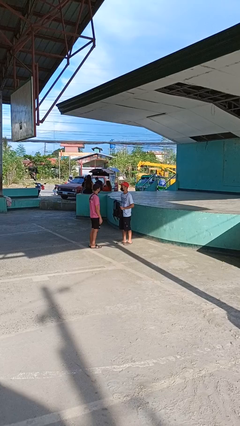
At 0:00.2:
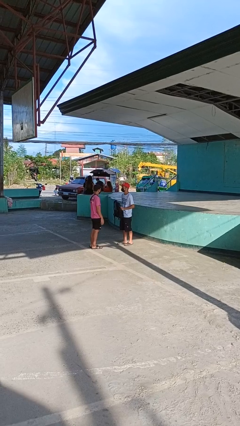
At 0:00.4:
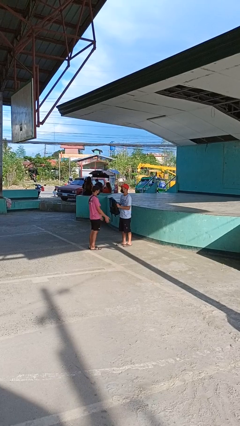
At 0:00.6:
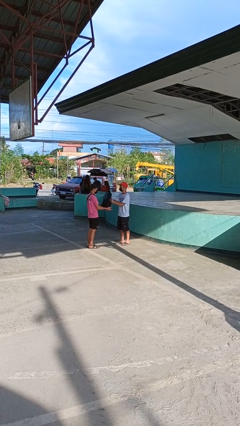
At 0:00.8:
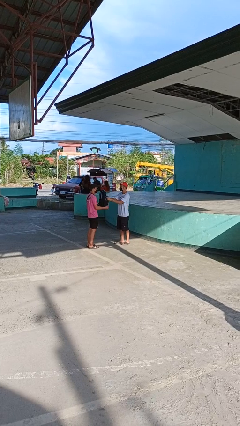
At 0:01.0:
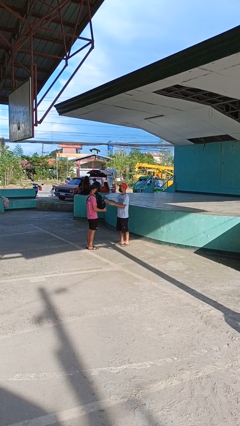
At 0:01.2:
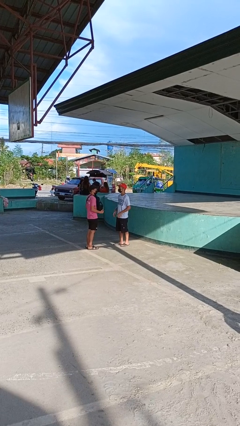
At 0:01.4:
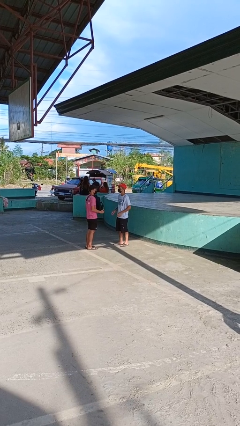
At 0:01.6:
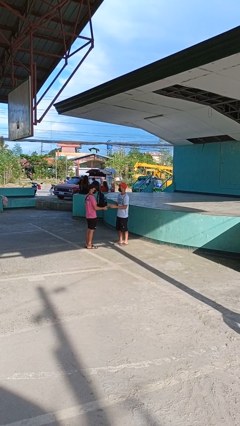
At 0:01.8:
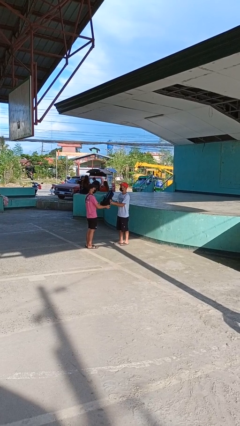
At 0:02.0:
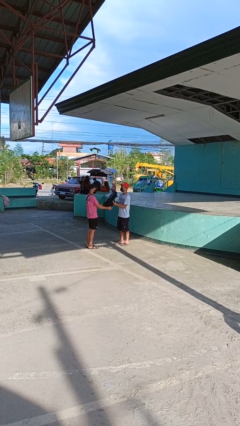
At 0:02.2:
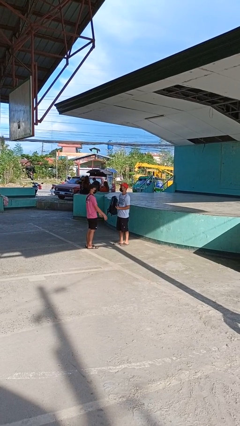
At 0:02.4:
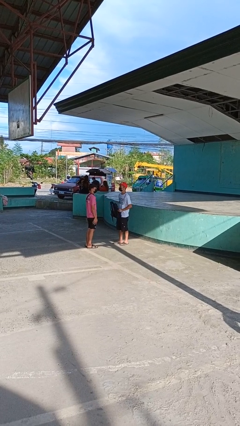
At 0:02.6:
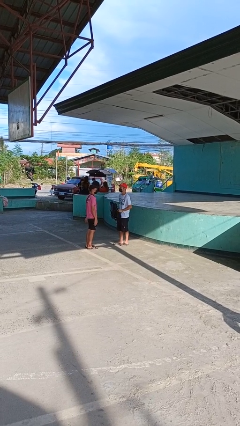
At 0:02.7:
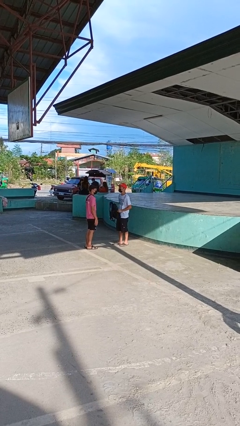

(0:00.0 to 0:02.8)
person transfers object to person

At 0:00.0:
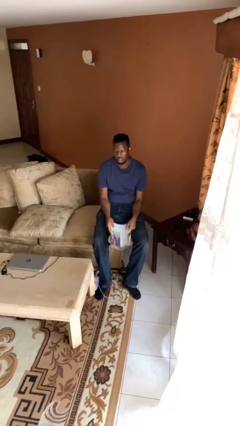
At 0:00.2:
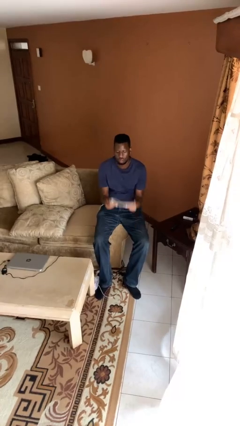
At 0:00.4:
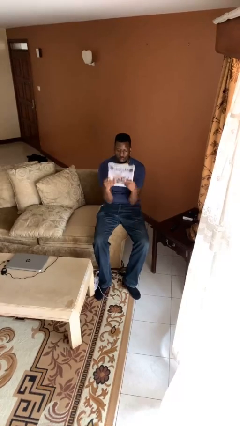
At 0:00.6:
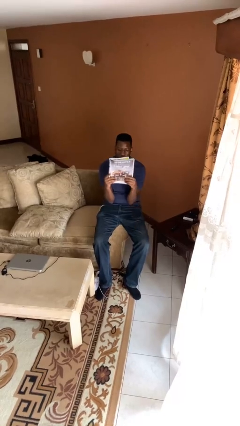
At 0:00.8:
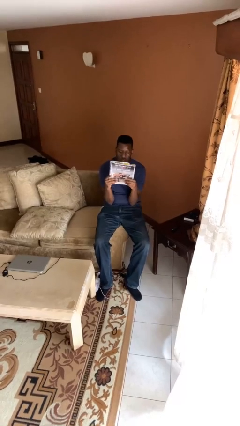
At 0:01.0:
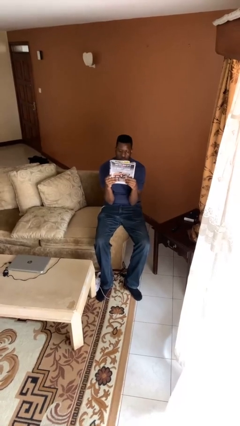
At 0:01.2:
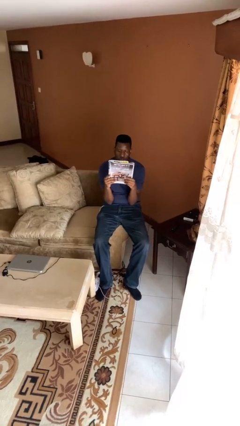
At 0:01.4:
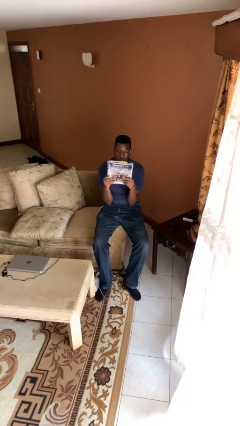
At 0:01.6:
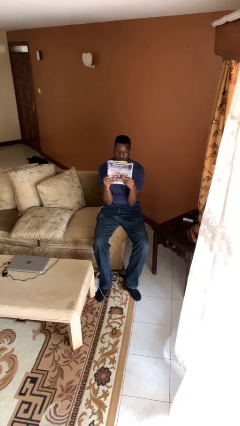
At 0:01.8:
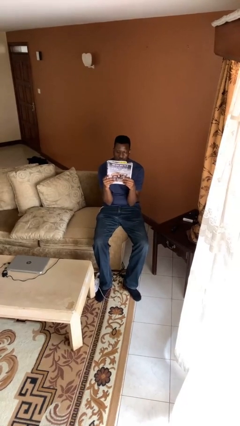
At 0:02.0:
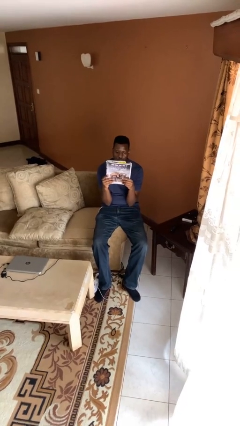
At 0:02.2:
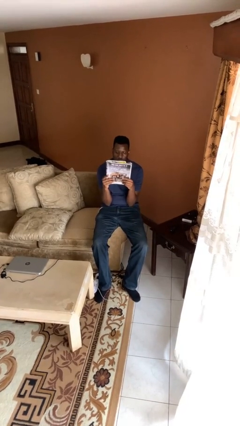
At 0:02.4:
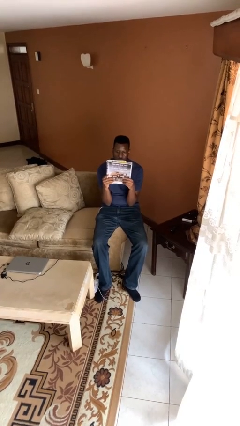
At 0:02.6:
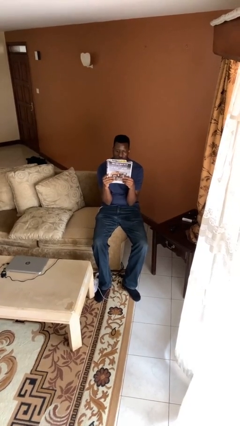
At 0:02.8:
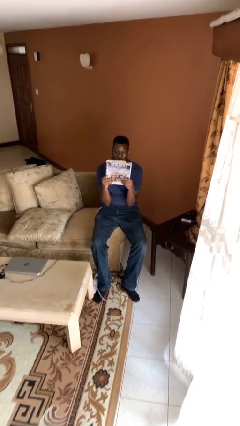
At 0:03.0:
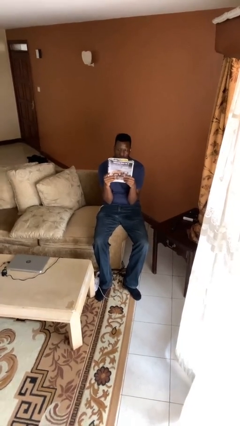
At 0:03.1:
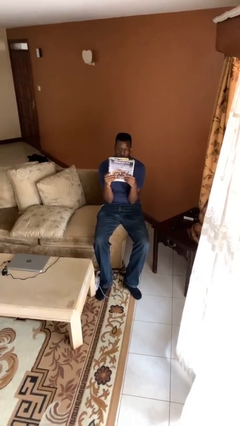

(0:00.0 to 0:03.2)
person reads document

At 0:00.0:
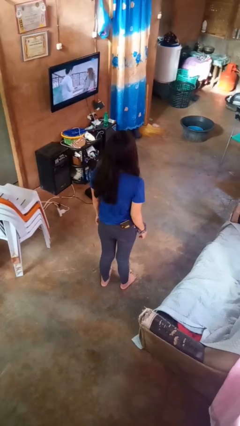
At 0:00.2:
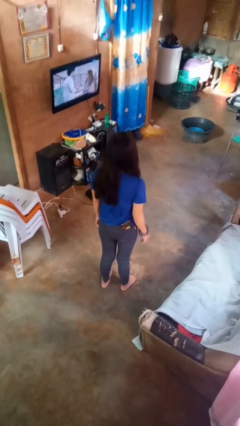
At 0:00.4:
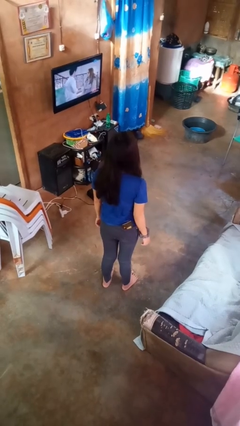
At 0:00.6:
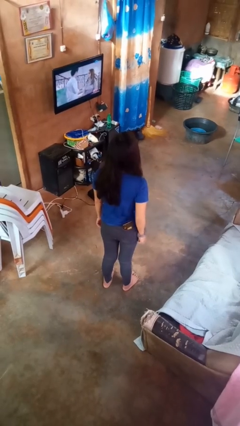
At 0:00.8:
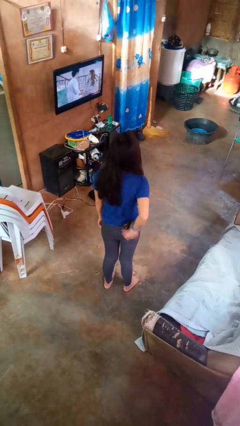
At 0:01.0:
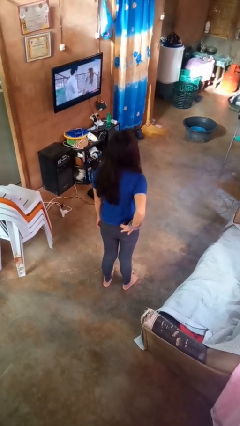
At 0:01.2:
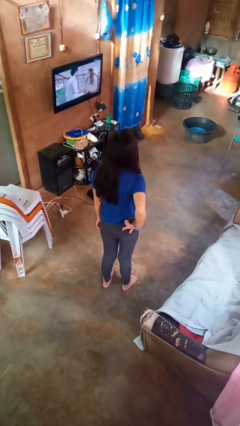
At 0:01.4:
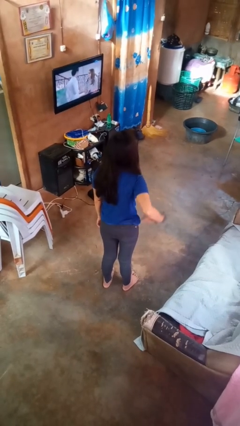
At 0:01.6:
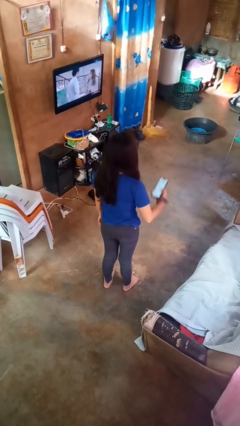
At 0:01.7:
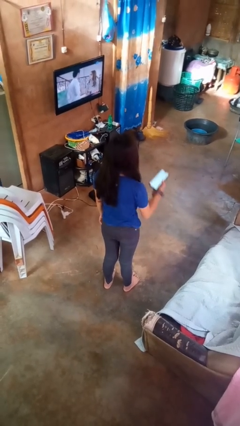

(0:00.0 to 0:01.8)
person takes phone from pocket

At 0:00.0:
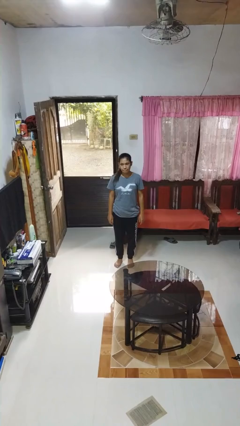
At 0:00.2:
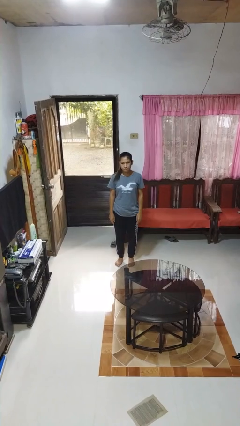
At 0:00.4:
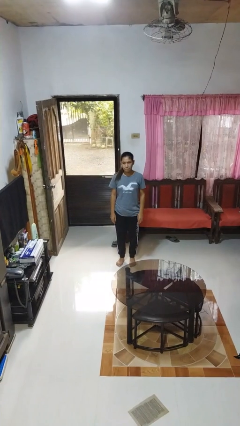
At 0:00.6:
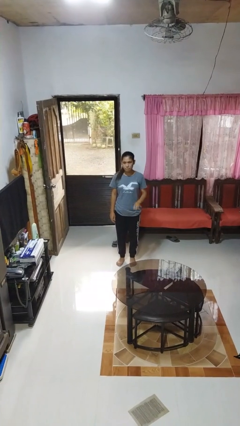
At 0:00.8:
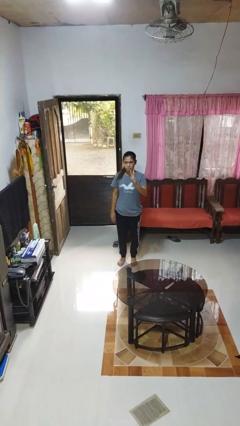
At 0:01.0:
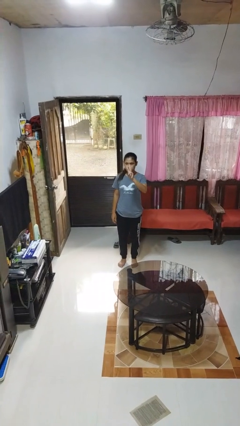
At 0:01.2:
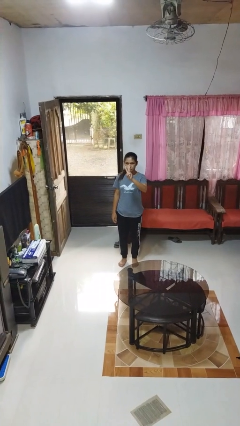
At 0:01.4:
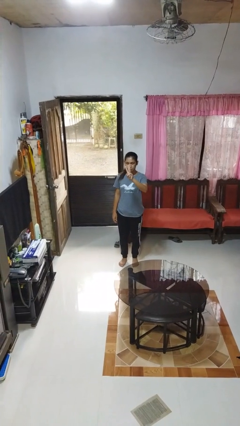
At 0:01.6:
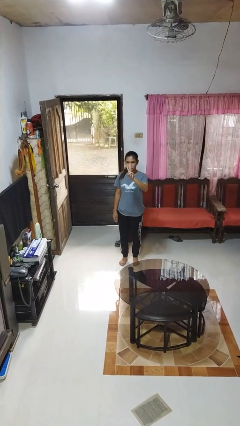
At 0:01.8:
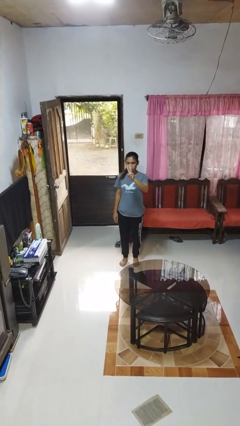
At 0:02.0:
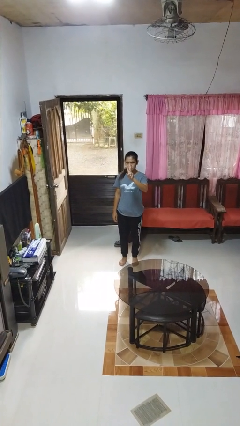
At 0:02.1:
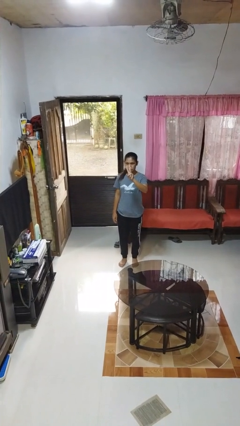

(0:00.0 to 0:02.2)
person gestures number three

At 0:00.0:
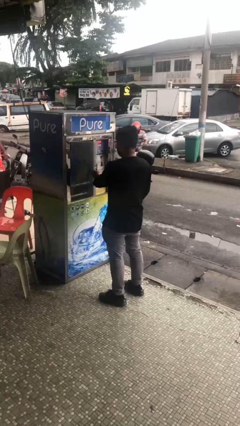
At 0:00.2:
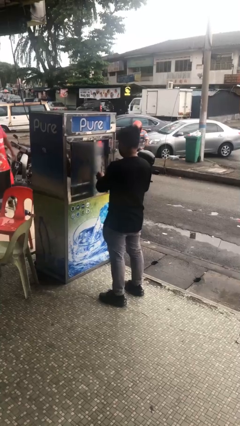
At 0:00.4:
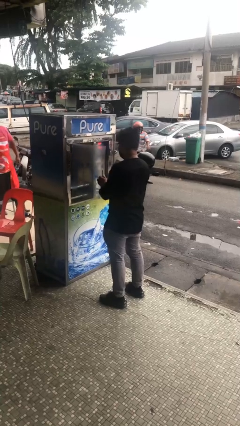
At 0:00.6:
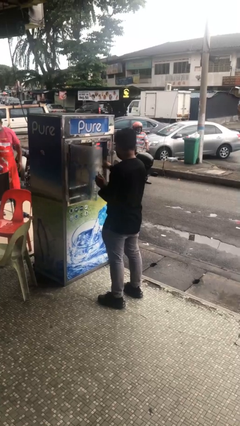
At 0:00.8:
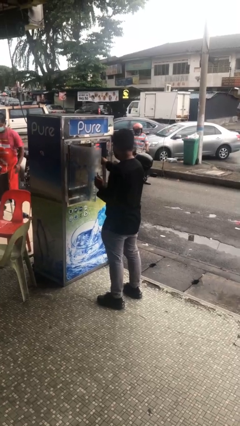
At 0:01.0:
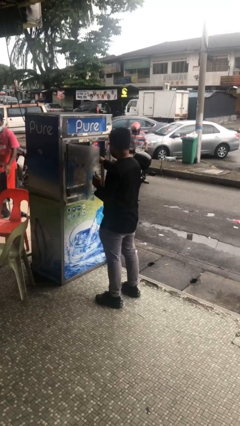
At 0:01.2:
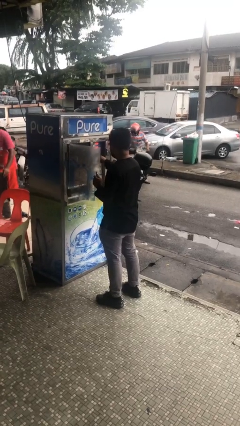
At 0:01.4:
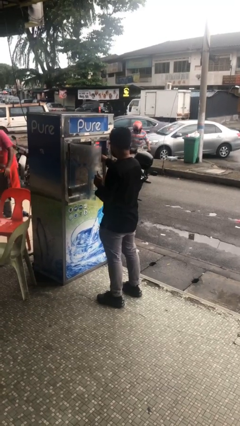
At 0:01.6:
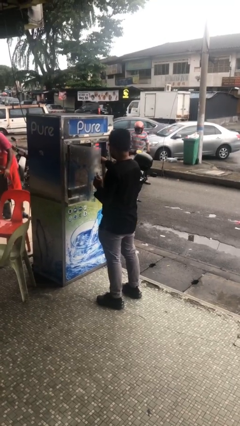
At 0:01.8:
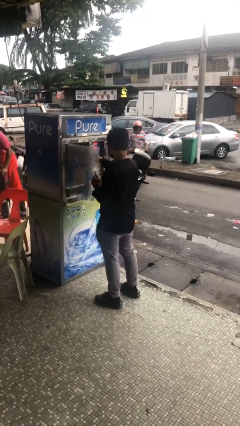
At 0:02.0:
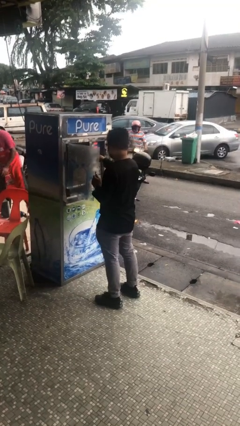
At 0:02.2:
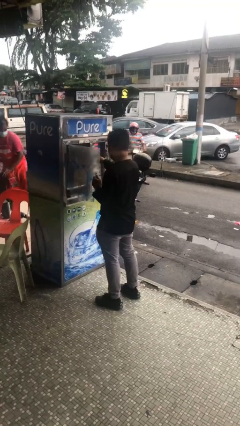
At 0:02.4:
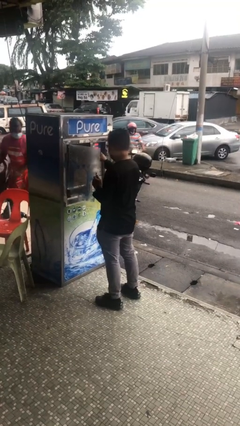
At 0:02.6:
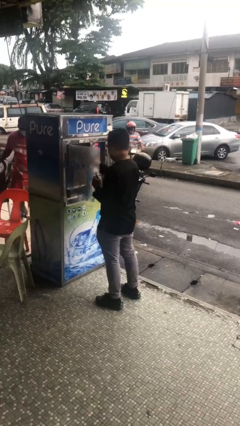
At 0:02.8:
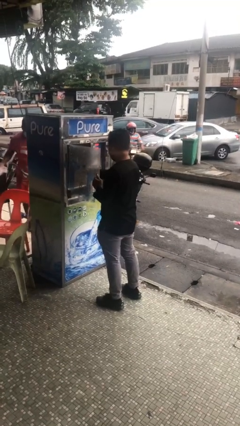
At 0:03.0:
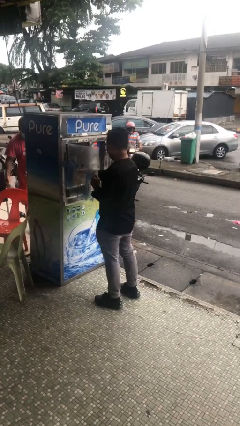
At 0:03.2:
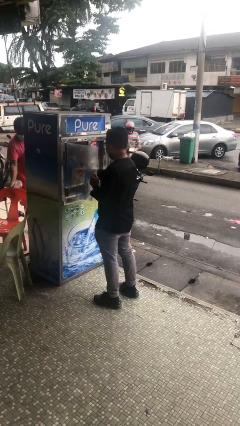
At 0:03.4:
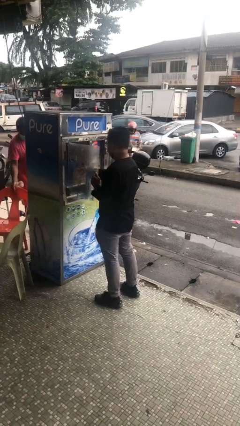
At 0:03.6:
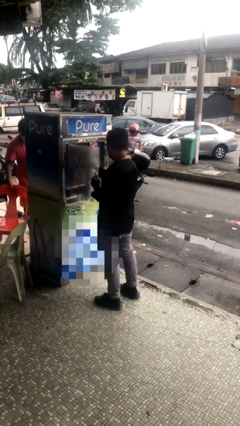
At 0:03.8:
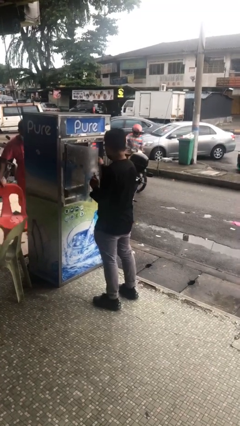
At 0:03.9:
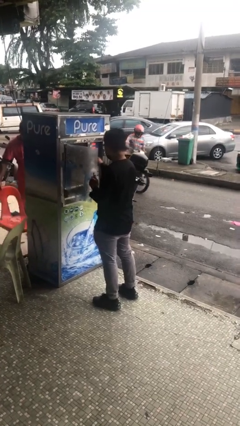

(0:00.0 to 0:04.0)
person purchases from machine

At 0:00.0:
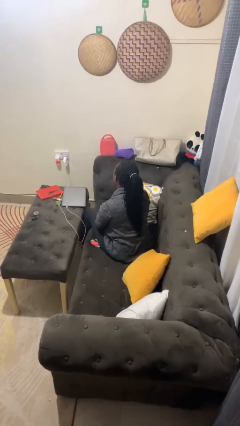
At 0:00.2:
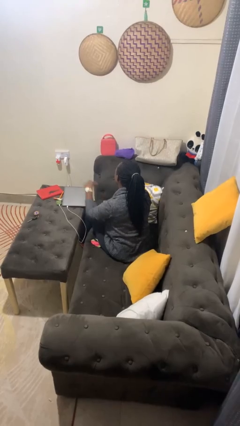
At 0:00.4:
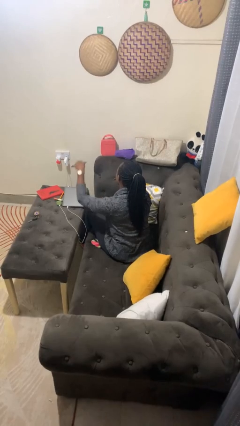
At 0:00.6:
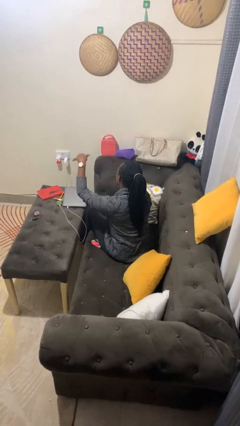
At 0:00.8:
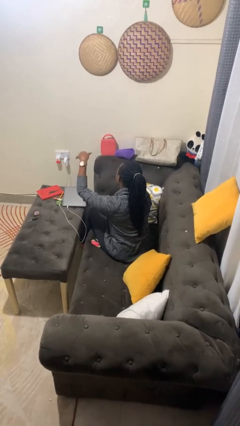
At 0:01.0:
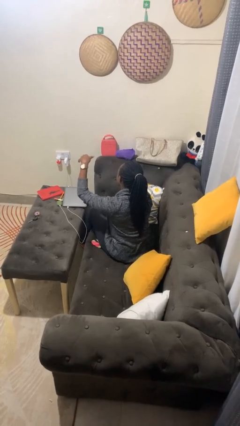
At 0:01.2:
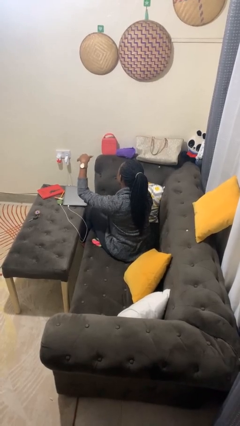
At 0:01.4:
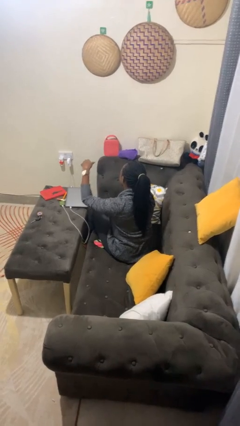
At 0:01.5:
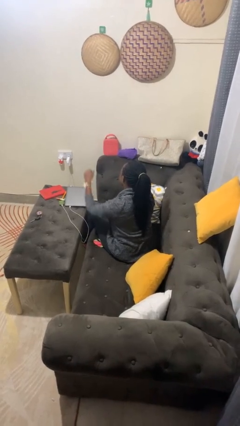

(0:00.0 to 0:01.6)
person gestures hang loose

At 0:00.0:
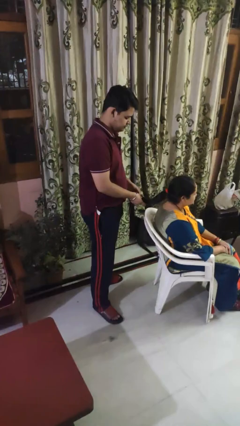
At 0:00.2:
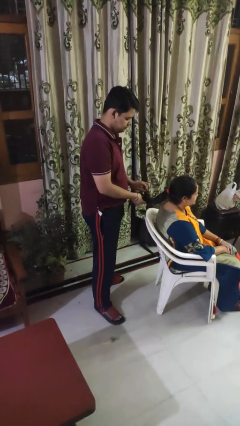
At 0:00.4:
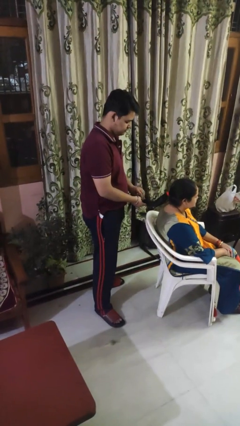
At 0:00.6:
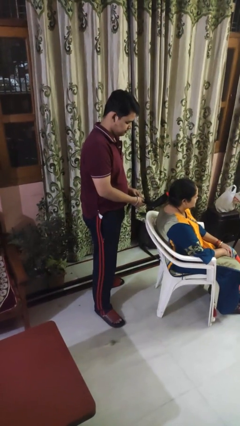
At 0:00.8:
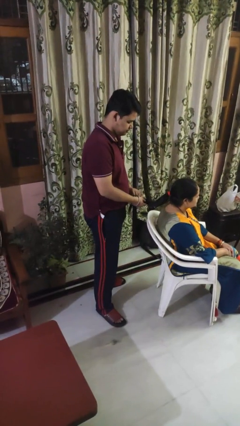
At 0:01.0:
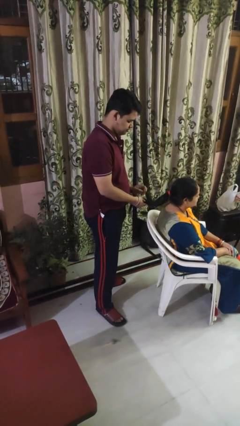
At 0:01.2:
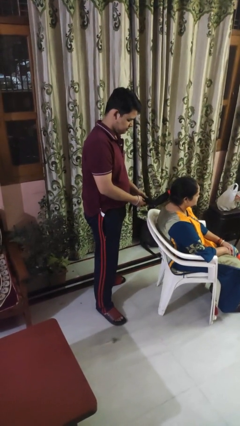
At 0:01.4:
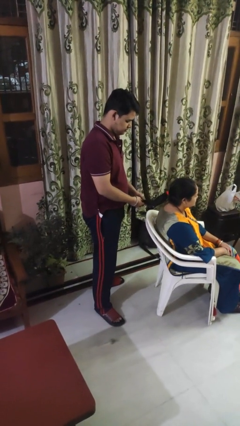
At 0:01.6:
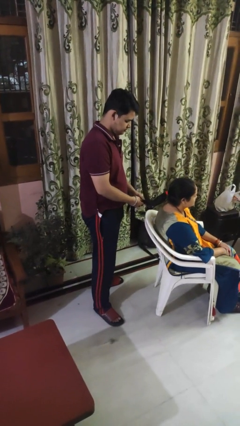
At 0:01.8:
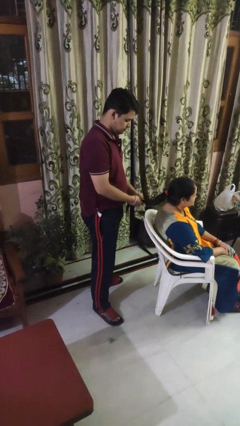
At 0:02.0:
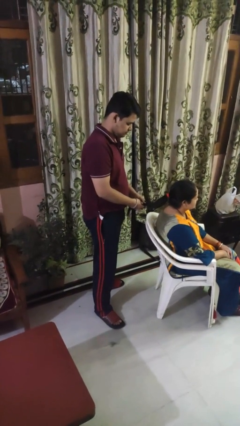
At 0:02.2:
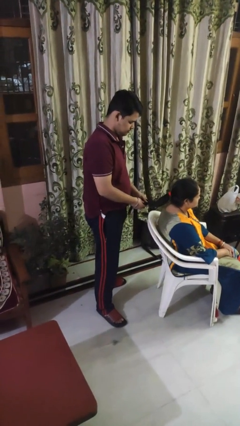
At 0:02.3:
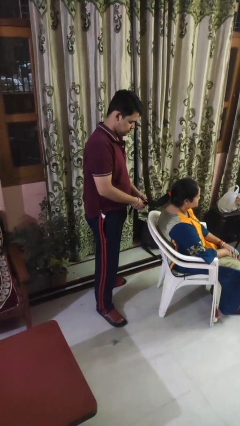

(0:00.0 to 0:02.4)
person braids hair of person
